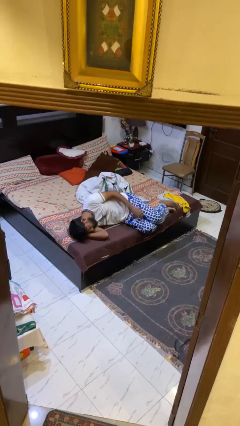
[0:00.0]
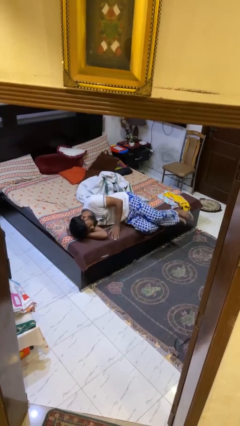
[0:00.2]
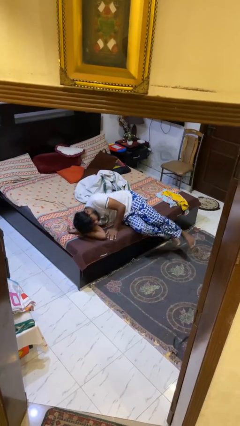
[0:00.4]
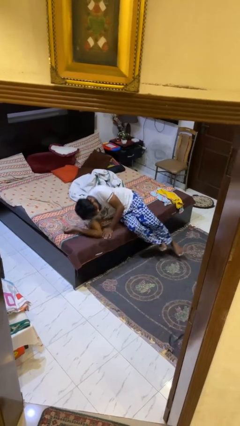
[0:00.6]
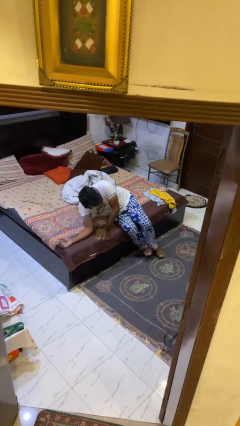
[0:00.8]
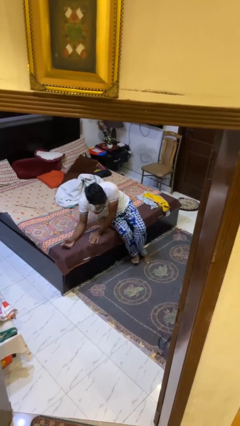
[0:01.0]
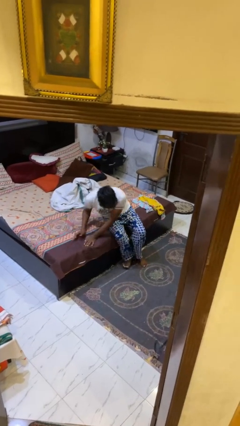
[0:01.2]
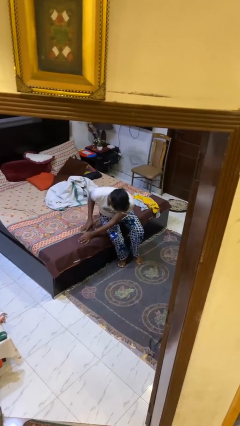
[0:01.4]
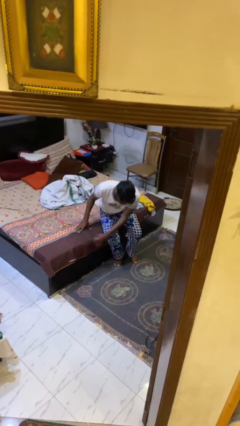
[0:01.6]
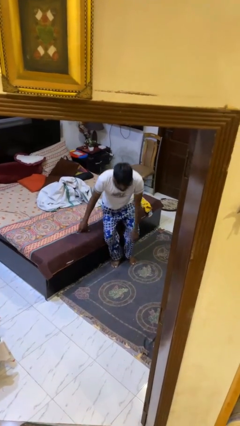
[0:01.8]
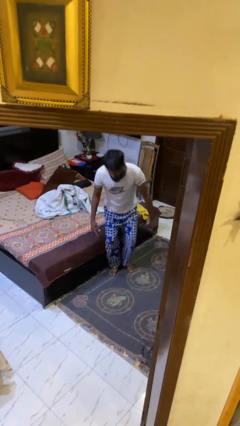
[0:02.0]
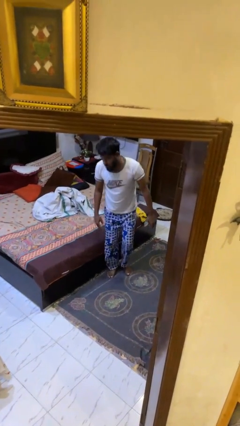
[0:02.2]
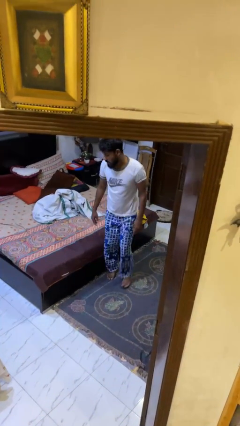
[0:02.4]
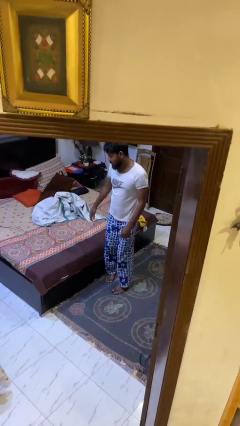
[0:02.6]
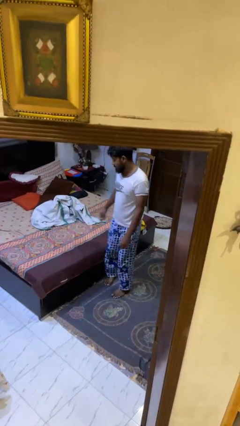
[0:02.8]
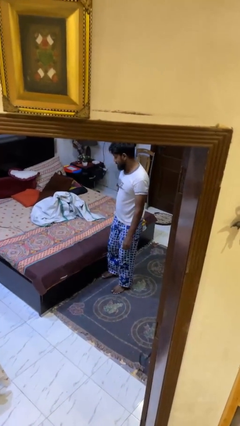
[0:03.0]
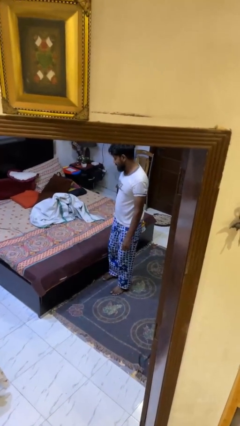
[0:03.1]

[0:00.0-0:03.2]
person stands up

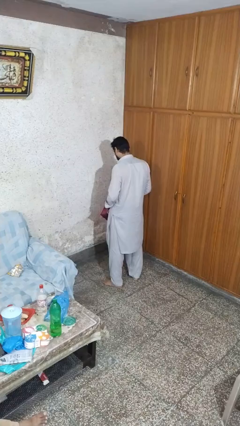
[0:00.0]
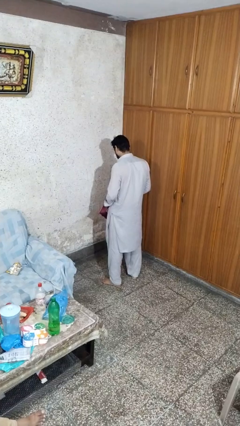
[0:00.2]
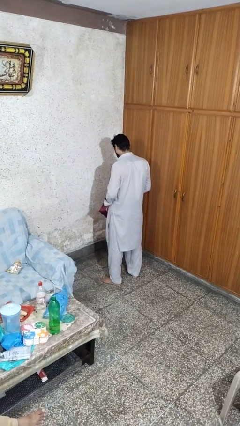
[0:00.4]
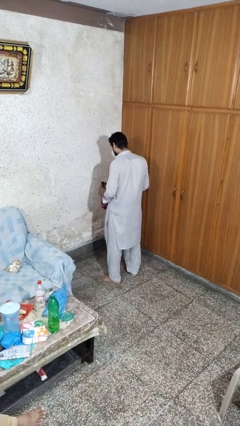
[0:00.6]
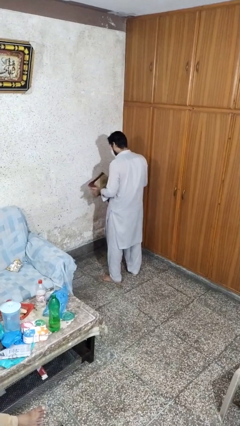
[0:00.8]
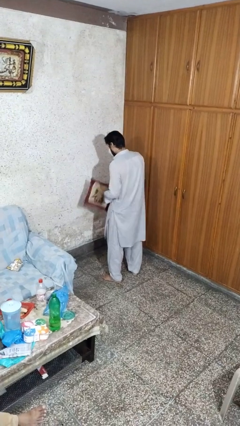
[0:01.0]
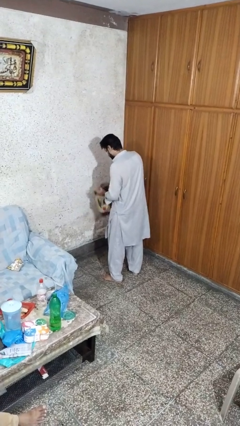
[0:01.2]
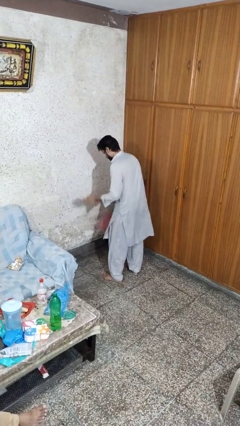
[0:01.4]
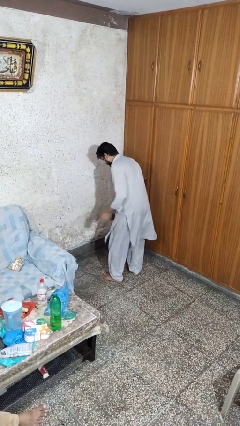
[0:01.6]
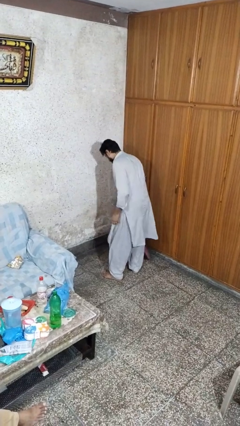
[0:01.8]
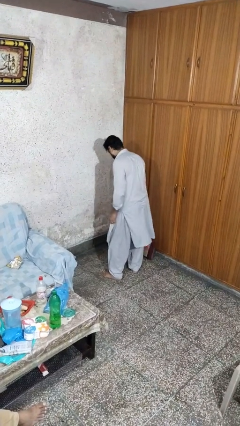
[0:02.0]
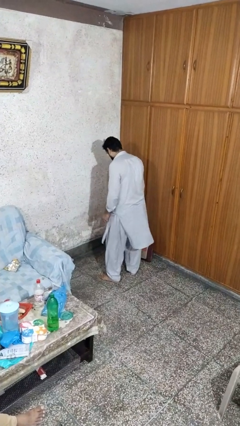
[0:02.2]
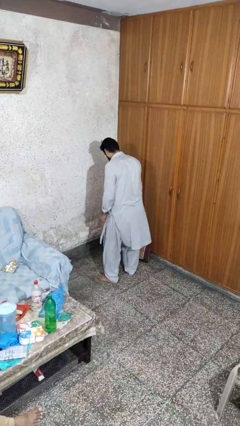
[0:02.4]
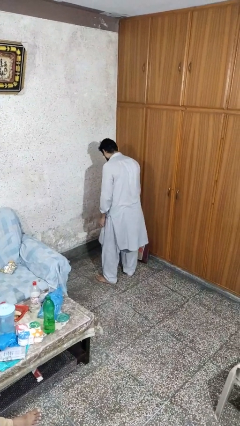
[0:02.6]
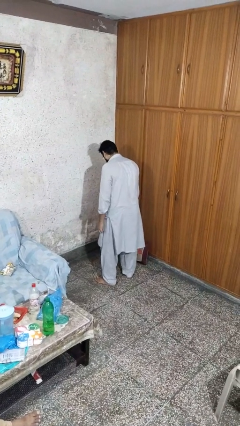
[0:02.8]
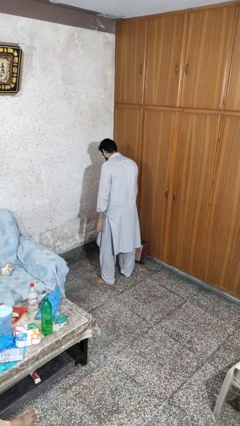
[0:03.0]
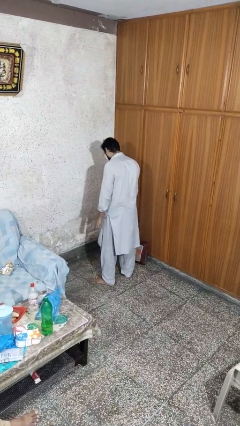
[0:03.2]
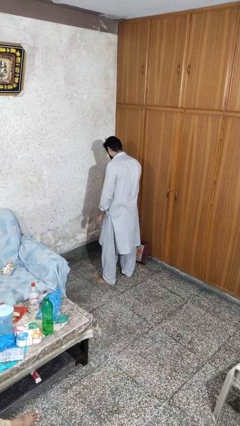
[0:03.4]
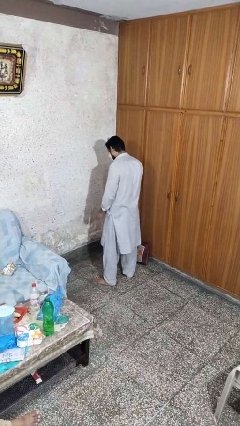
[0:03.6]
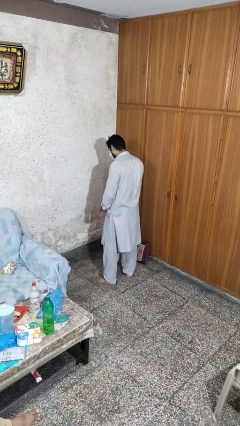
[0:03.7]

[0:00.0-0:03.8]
person drops object

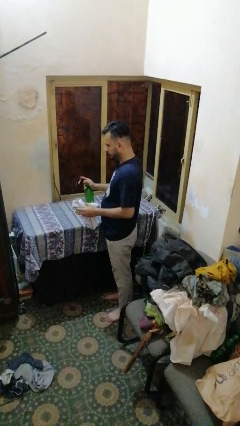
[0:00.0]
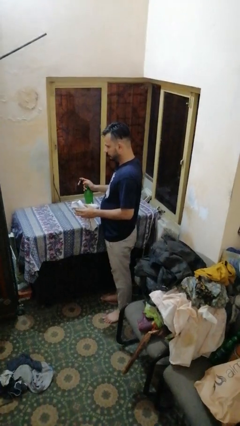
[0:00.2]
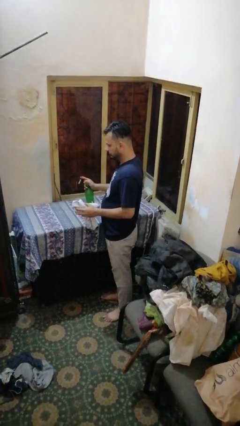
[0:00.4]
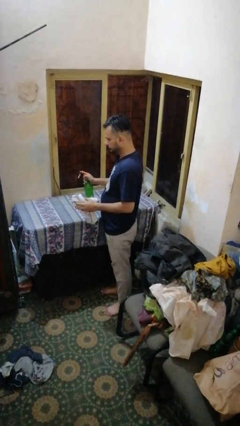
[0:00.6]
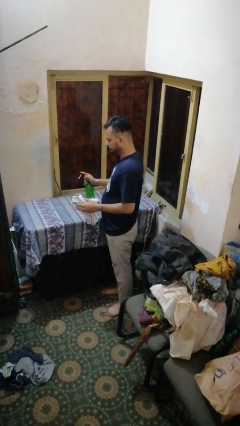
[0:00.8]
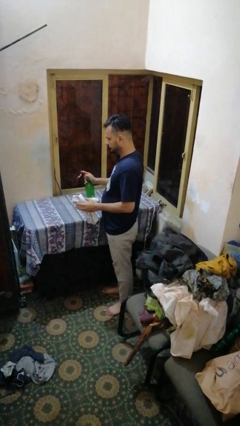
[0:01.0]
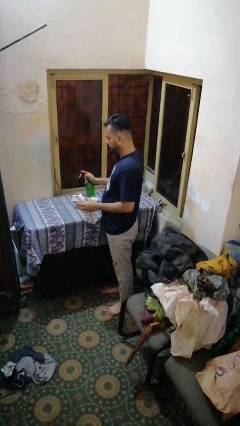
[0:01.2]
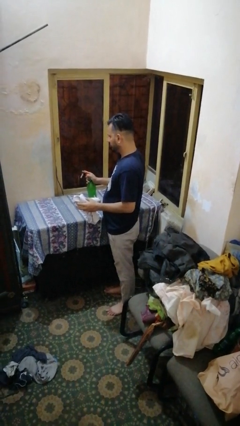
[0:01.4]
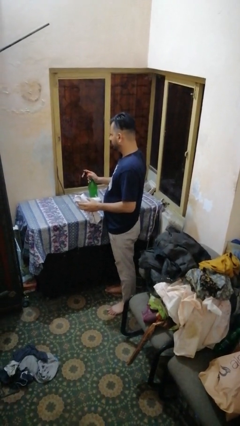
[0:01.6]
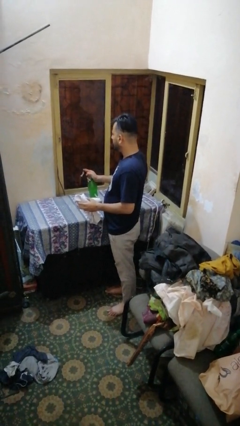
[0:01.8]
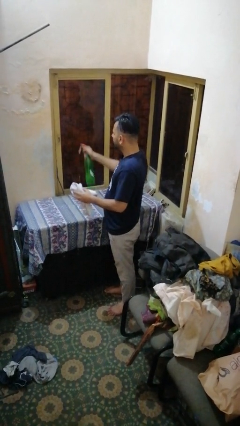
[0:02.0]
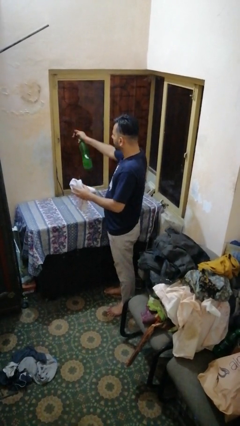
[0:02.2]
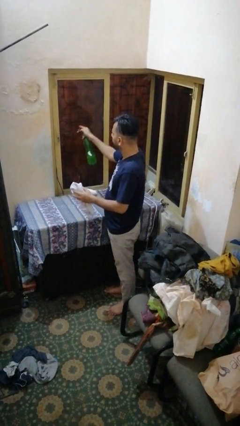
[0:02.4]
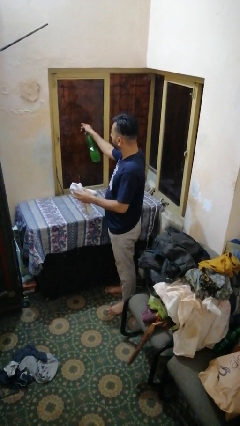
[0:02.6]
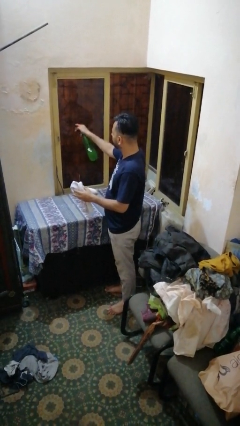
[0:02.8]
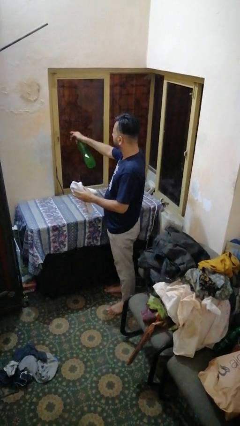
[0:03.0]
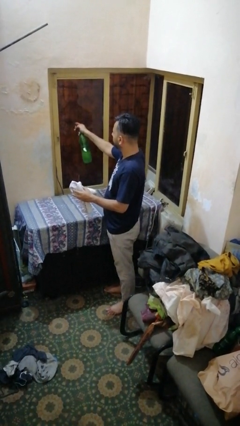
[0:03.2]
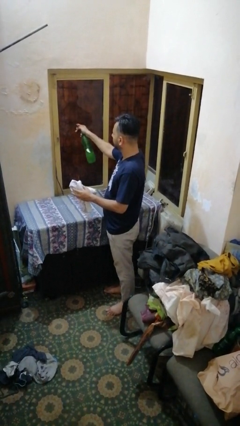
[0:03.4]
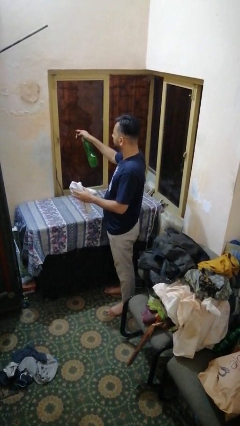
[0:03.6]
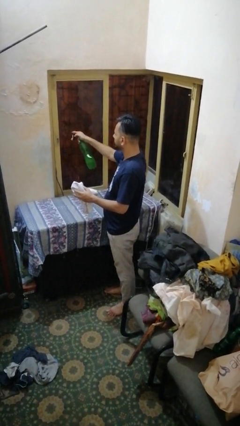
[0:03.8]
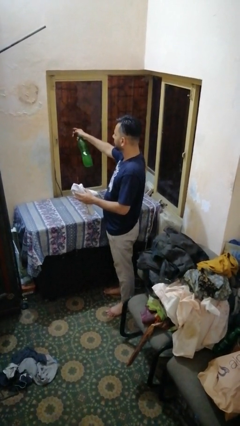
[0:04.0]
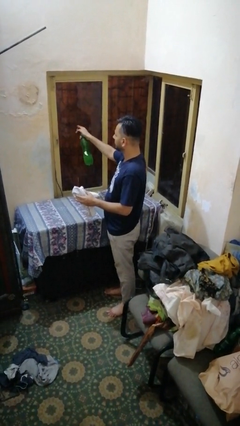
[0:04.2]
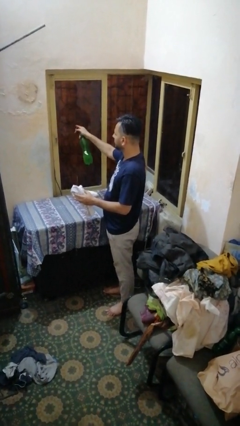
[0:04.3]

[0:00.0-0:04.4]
person sprays from bottle

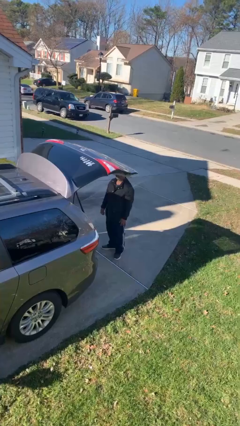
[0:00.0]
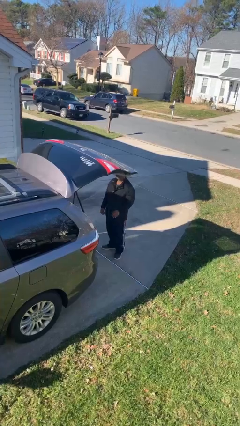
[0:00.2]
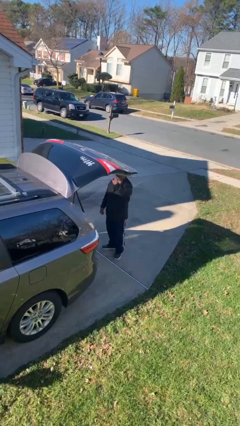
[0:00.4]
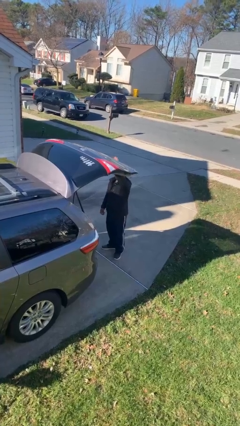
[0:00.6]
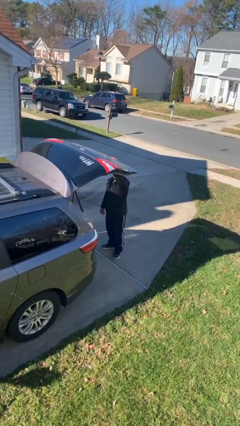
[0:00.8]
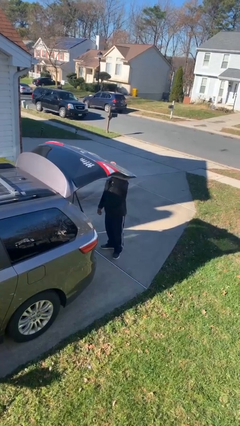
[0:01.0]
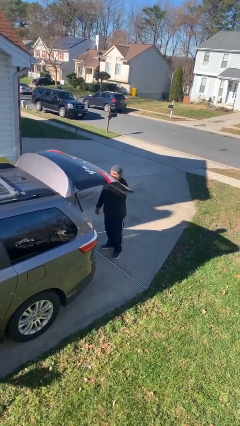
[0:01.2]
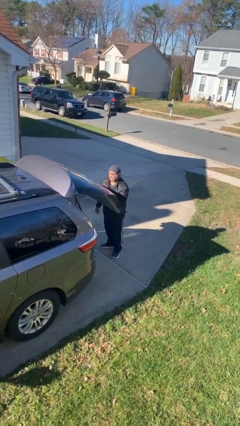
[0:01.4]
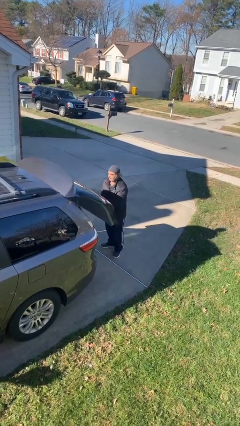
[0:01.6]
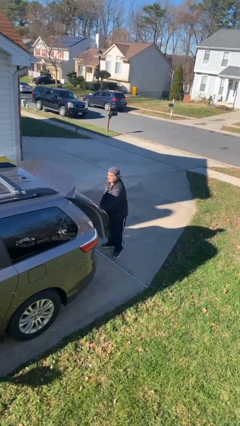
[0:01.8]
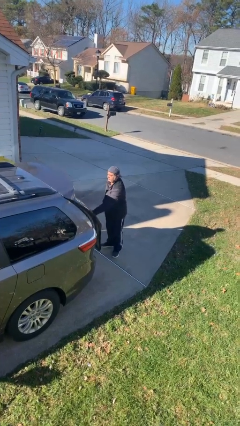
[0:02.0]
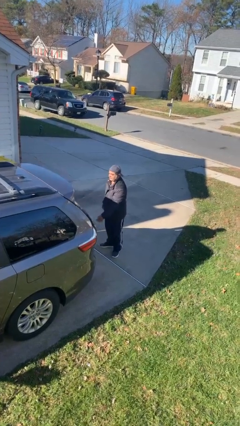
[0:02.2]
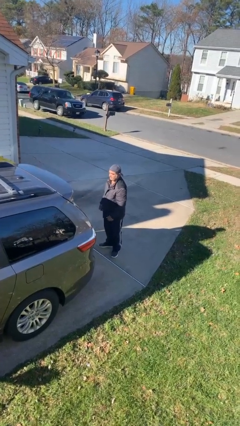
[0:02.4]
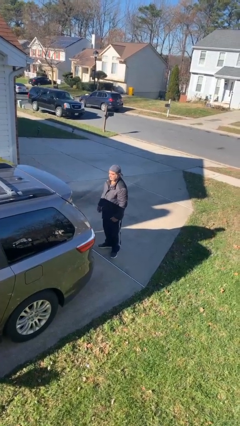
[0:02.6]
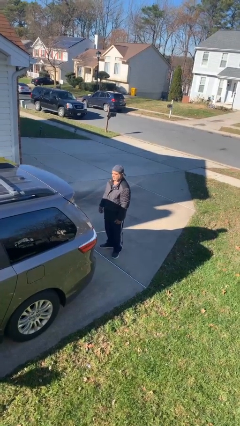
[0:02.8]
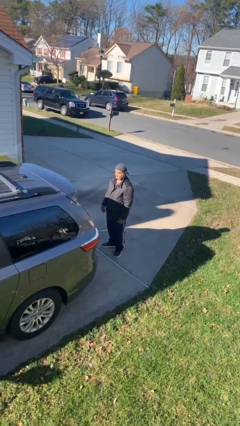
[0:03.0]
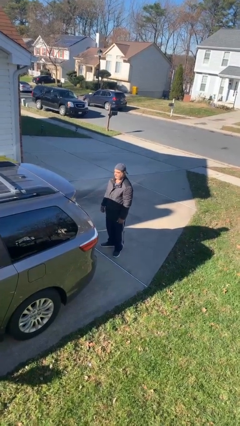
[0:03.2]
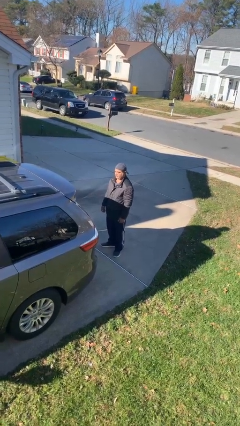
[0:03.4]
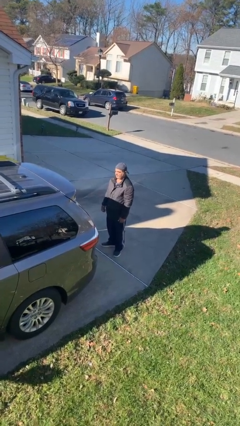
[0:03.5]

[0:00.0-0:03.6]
person closes car trunk

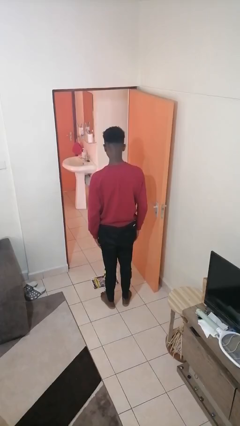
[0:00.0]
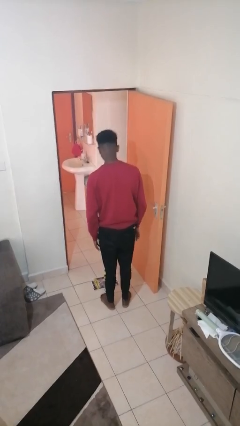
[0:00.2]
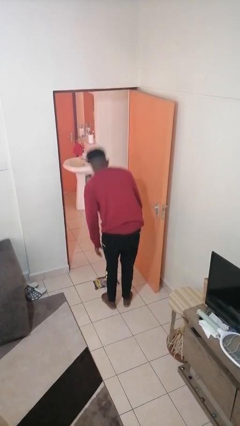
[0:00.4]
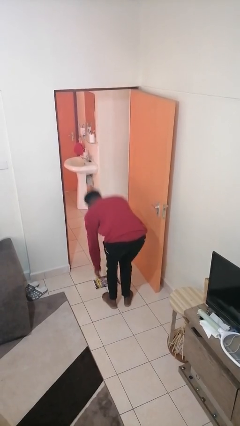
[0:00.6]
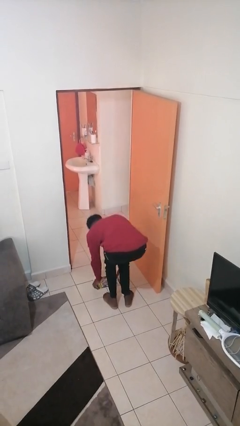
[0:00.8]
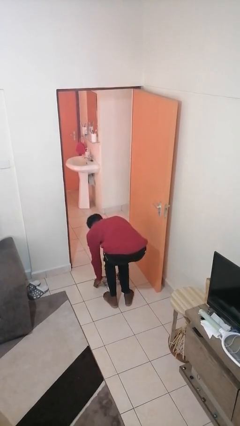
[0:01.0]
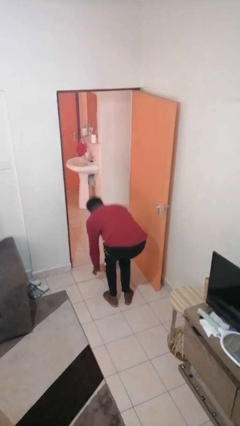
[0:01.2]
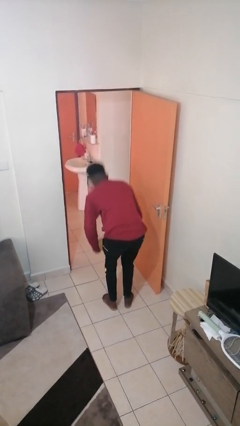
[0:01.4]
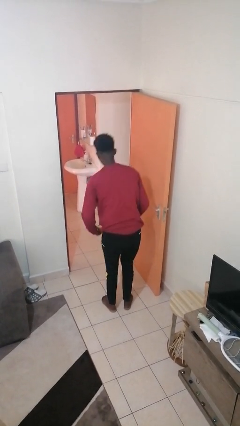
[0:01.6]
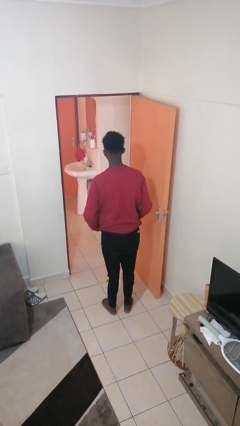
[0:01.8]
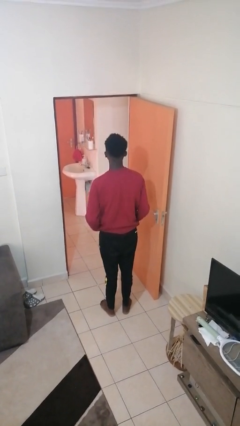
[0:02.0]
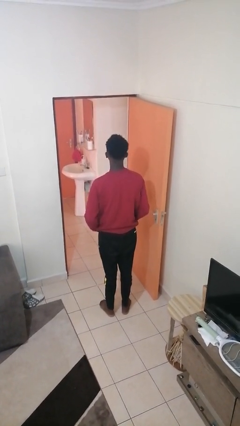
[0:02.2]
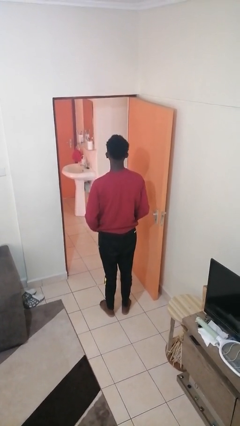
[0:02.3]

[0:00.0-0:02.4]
person picks up object from floor
